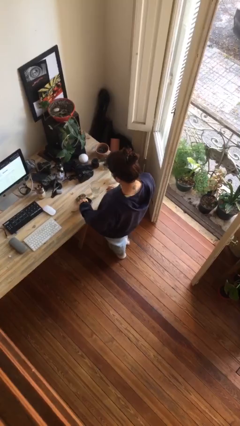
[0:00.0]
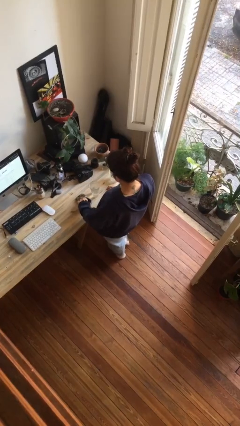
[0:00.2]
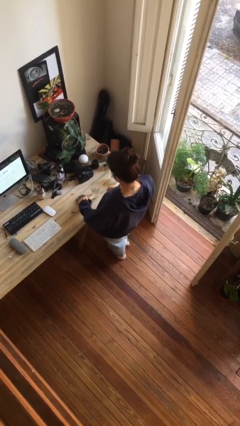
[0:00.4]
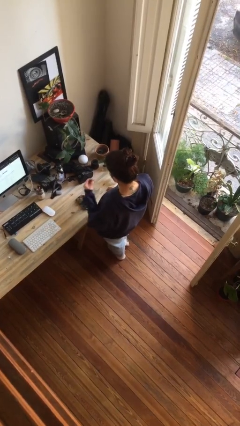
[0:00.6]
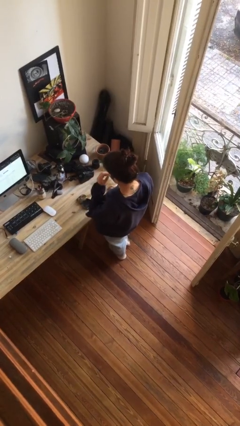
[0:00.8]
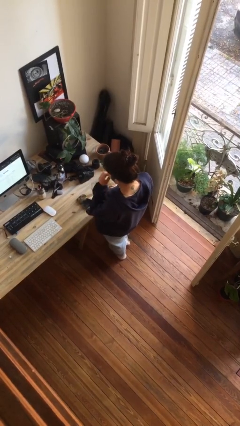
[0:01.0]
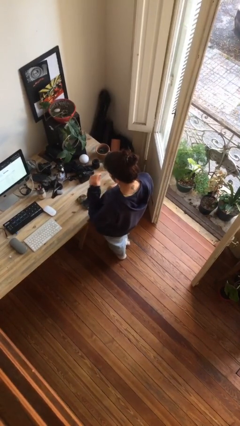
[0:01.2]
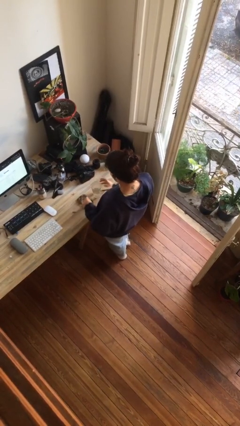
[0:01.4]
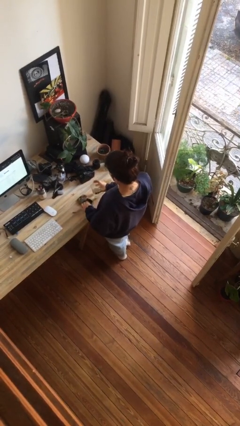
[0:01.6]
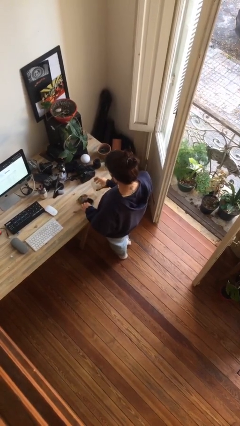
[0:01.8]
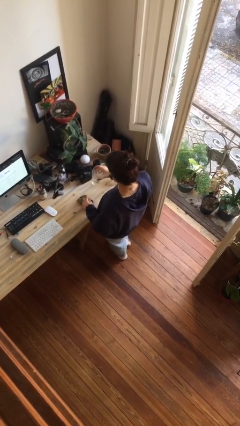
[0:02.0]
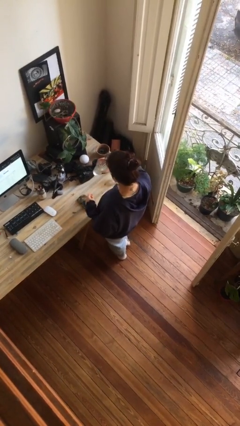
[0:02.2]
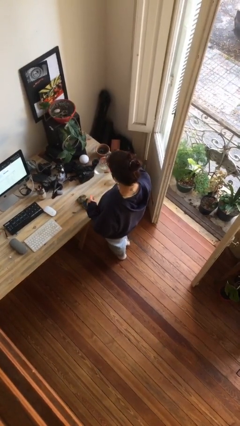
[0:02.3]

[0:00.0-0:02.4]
person takes medicine pills

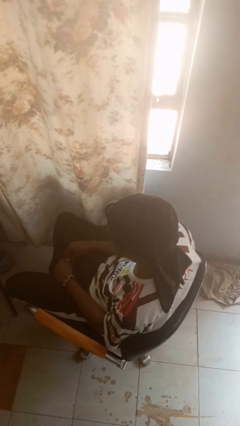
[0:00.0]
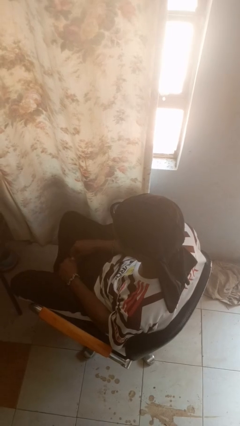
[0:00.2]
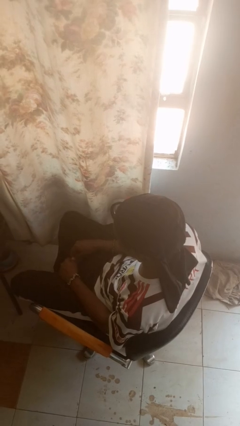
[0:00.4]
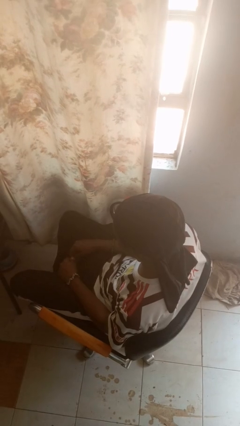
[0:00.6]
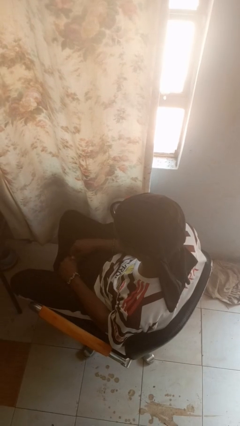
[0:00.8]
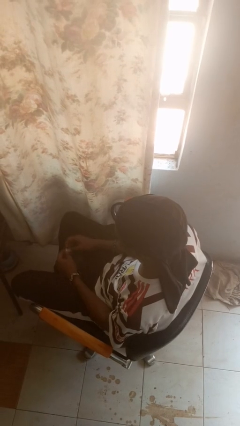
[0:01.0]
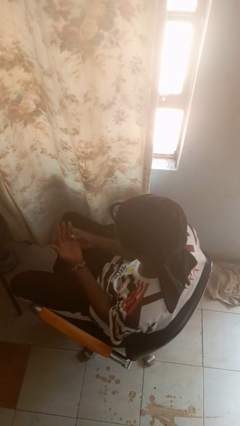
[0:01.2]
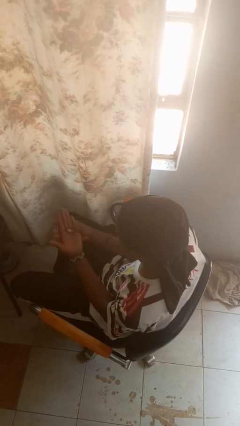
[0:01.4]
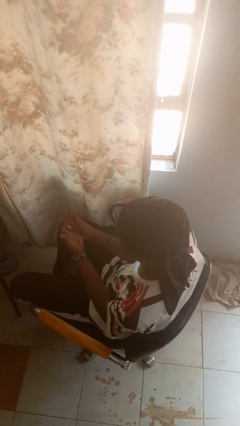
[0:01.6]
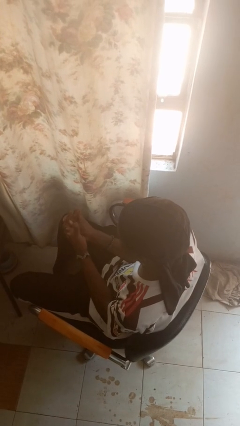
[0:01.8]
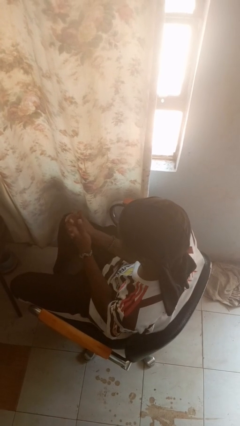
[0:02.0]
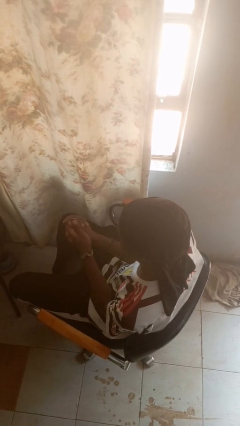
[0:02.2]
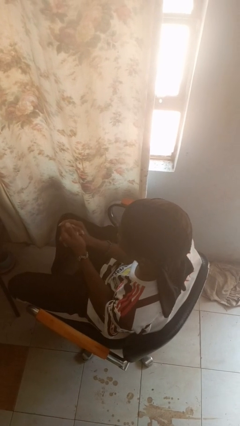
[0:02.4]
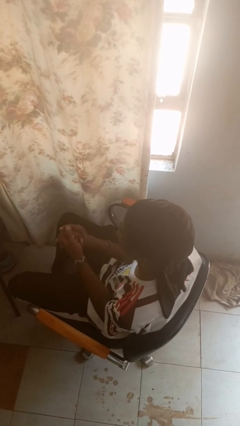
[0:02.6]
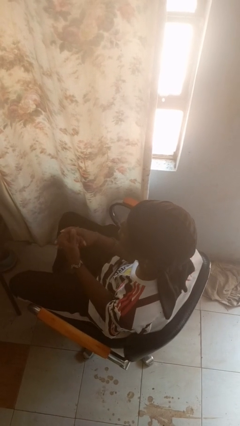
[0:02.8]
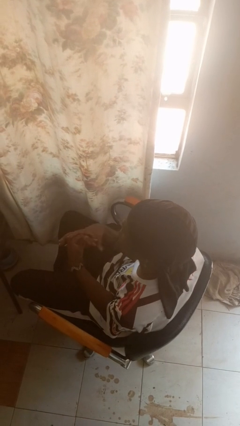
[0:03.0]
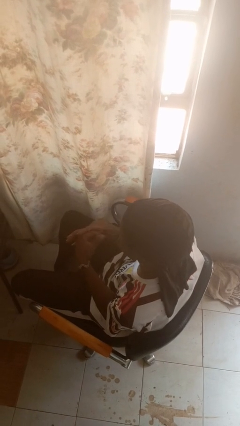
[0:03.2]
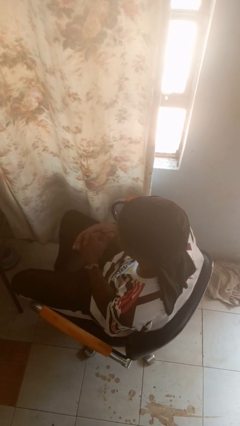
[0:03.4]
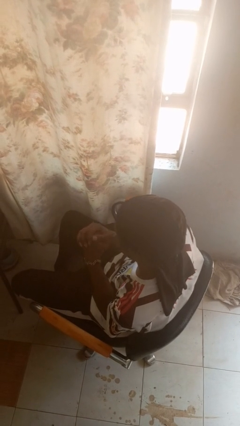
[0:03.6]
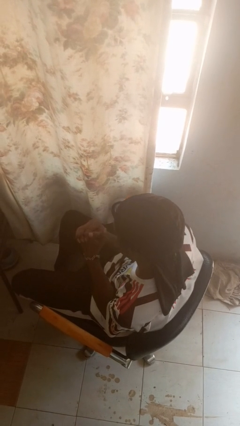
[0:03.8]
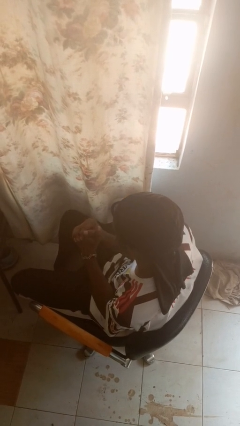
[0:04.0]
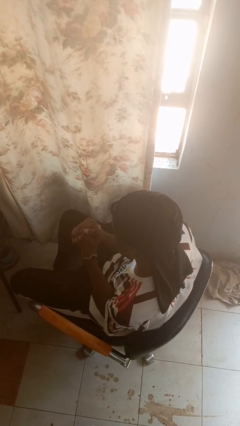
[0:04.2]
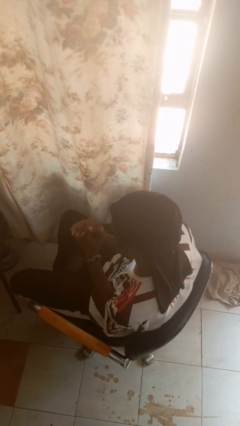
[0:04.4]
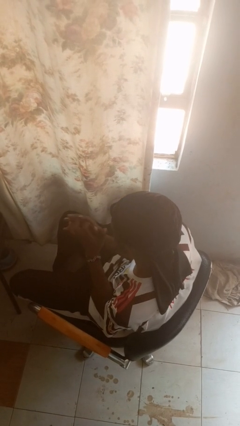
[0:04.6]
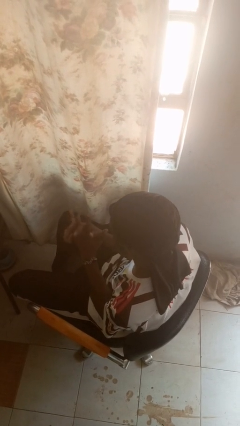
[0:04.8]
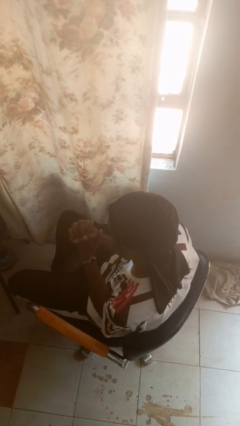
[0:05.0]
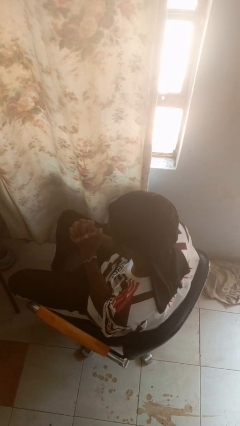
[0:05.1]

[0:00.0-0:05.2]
person looks at hands in lap

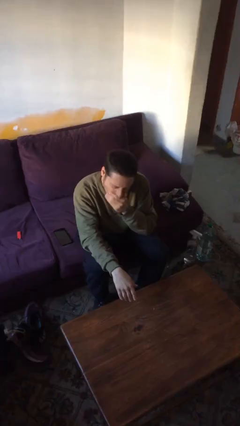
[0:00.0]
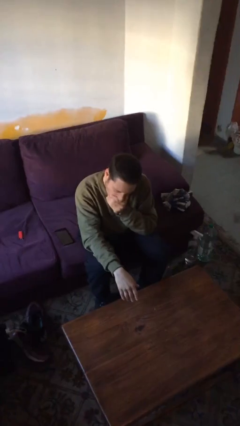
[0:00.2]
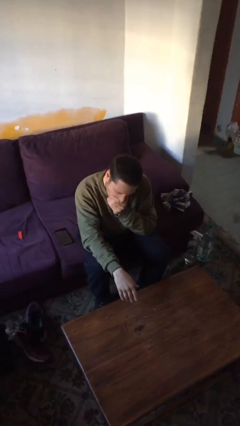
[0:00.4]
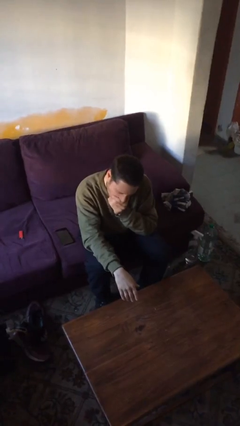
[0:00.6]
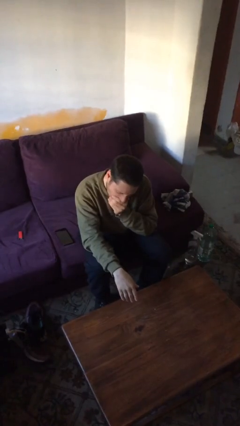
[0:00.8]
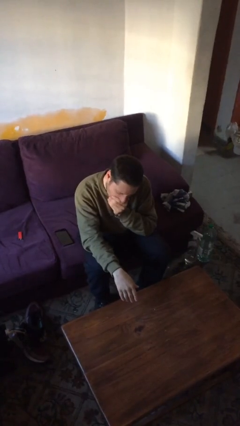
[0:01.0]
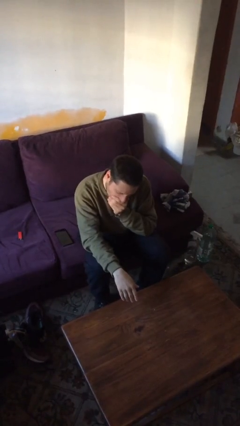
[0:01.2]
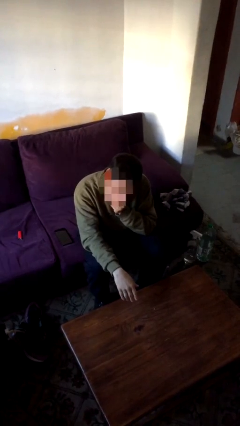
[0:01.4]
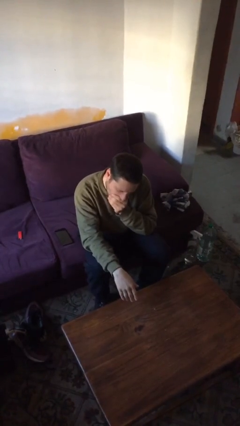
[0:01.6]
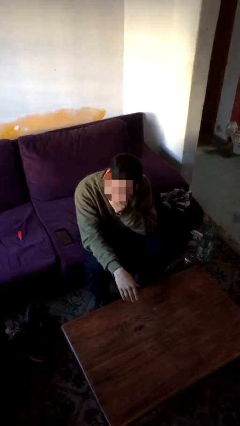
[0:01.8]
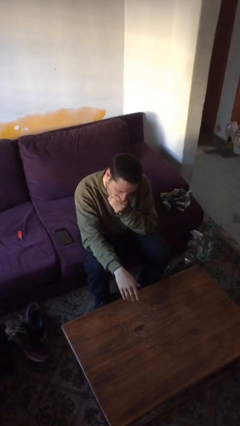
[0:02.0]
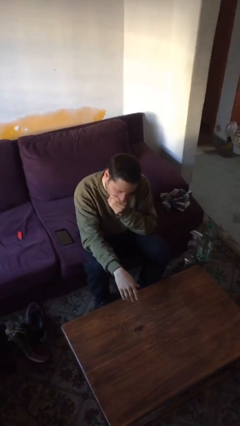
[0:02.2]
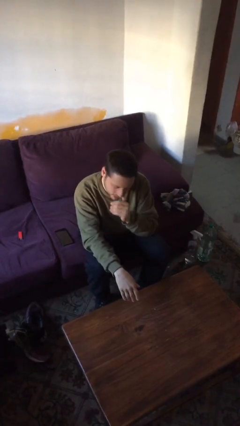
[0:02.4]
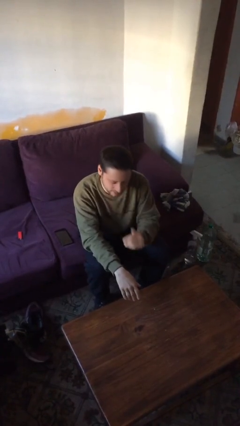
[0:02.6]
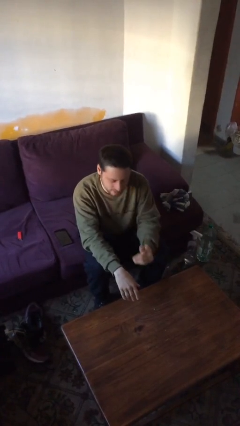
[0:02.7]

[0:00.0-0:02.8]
person yawns

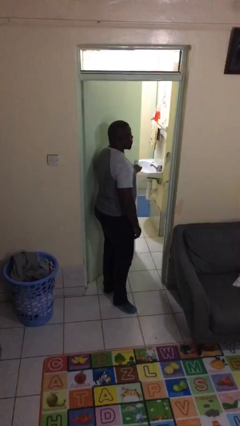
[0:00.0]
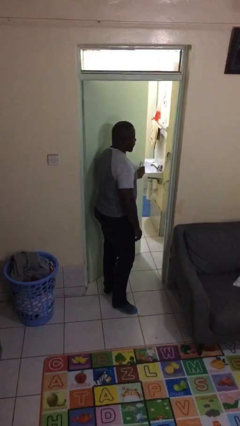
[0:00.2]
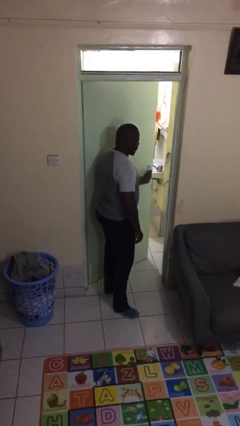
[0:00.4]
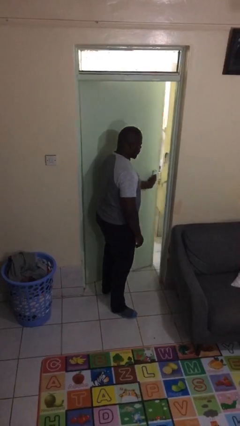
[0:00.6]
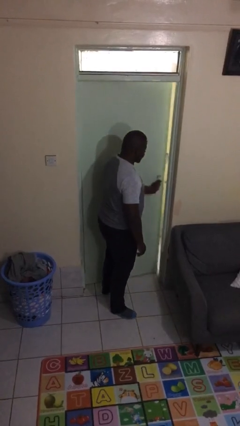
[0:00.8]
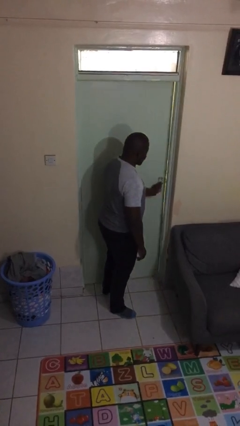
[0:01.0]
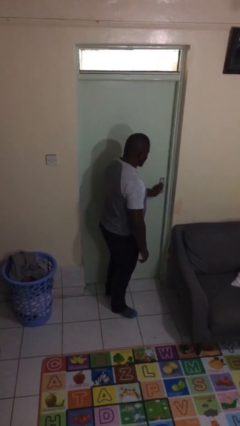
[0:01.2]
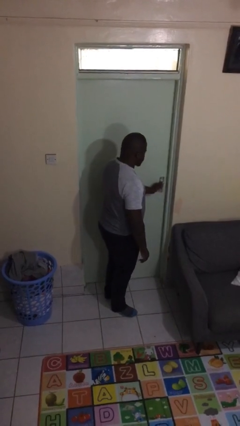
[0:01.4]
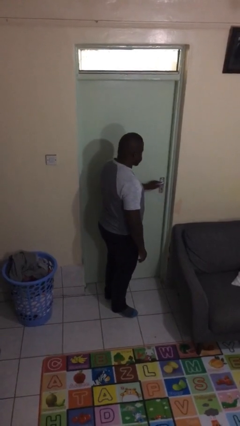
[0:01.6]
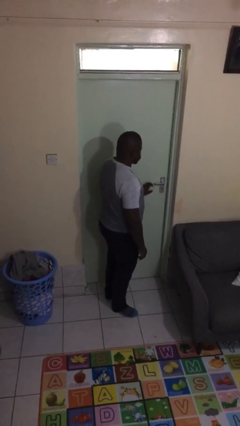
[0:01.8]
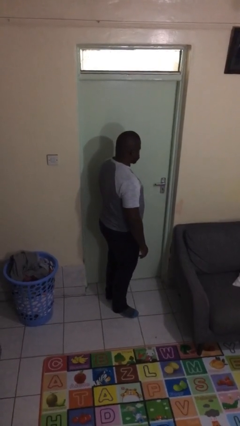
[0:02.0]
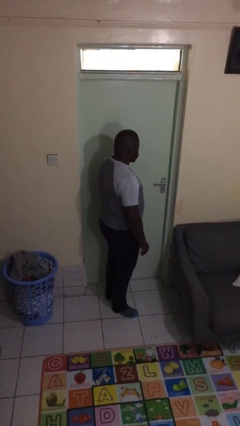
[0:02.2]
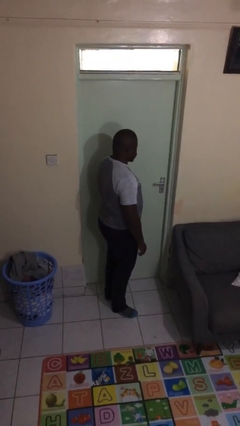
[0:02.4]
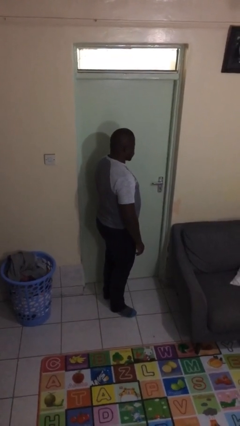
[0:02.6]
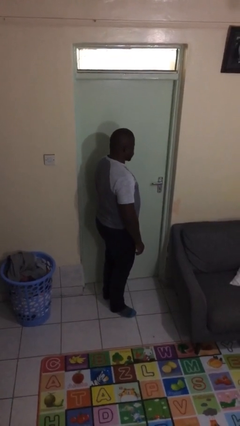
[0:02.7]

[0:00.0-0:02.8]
person closes facility door

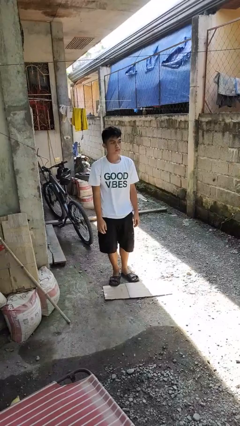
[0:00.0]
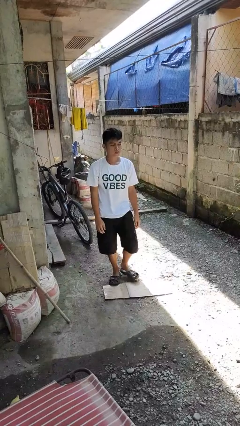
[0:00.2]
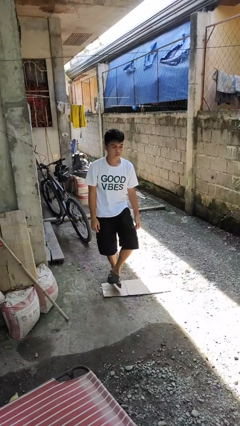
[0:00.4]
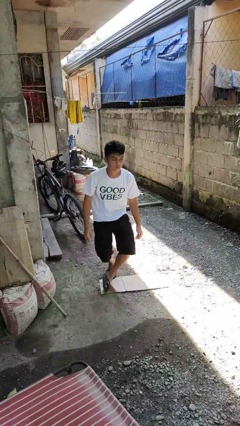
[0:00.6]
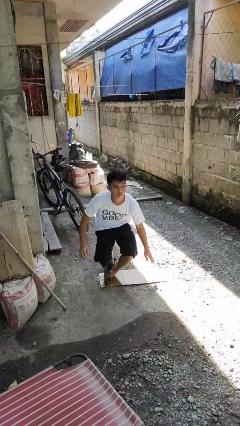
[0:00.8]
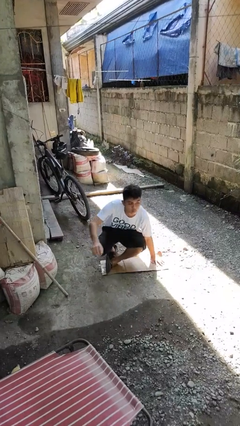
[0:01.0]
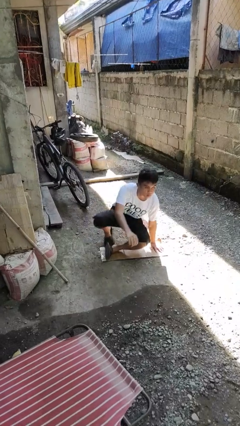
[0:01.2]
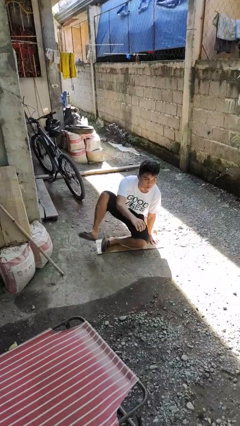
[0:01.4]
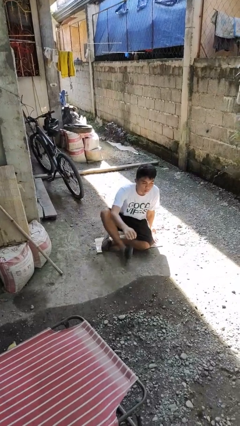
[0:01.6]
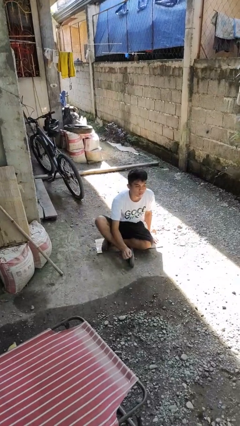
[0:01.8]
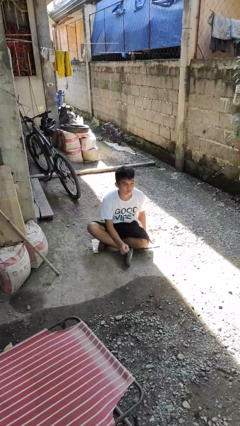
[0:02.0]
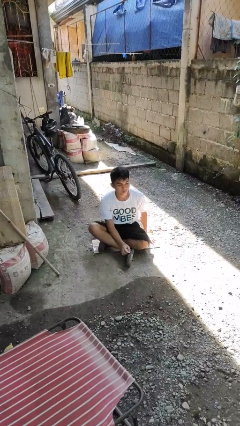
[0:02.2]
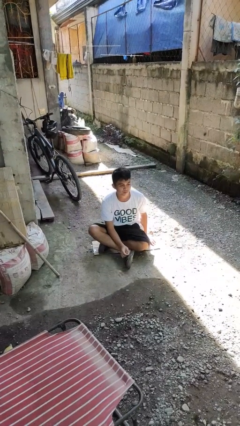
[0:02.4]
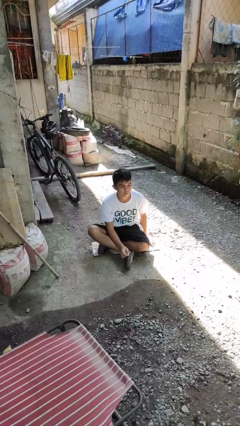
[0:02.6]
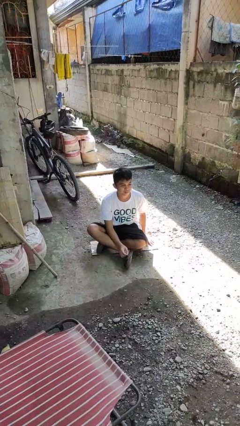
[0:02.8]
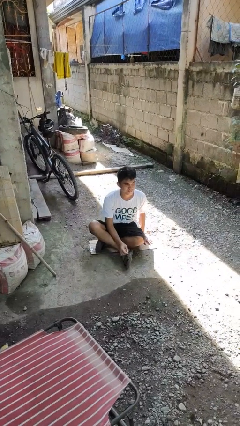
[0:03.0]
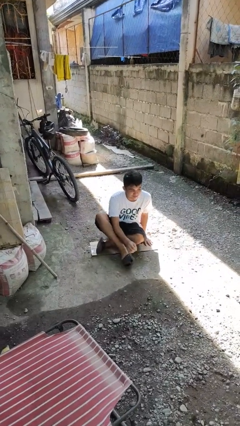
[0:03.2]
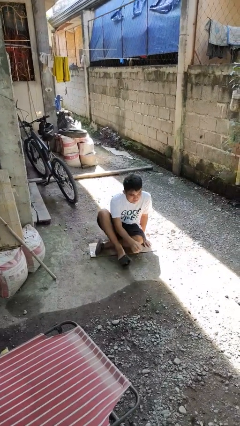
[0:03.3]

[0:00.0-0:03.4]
person sits crisscross

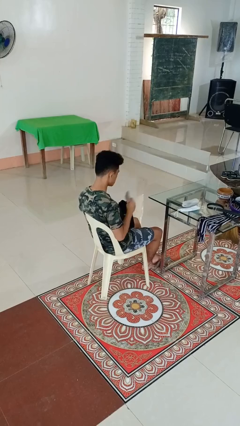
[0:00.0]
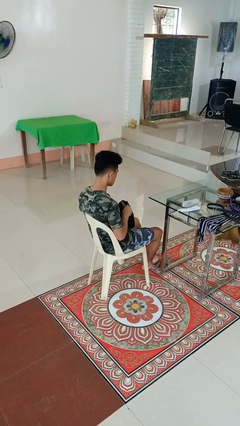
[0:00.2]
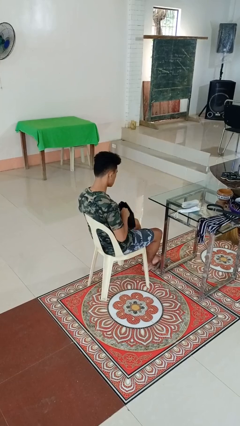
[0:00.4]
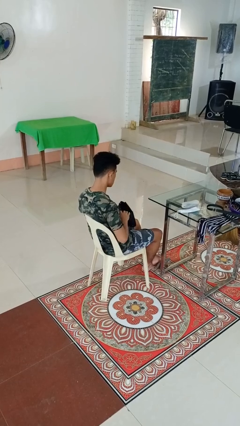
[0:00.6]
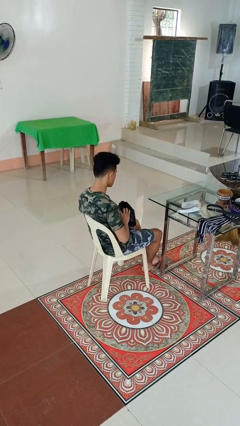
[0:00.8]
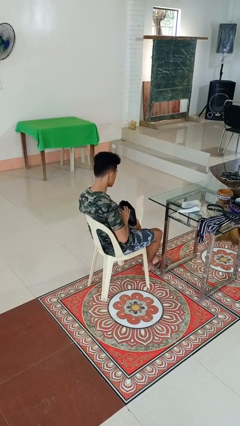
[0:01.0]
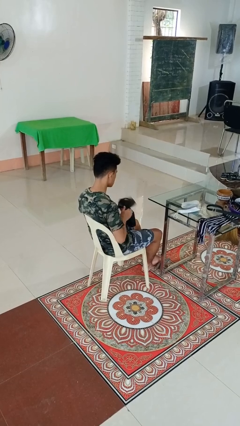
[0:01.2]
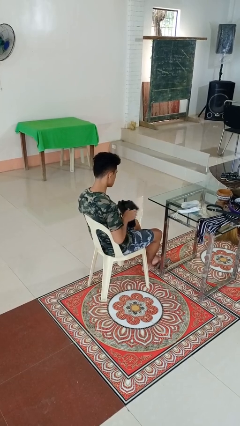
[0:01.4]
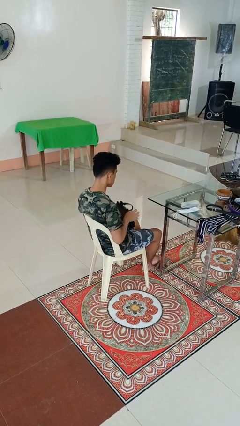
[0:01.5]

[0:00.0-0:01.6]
person puts object into purse
